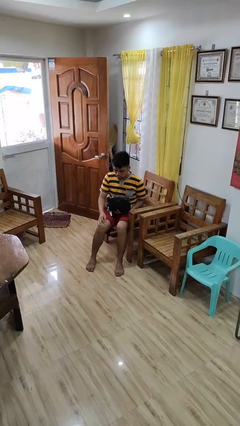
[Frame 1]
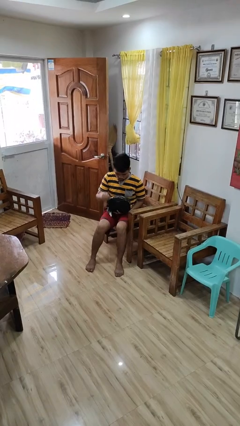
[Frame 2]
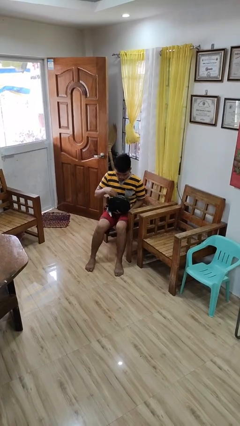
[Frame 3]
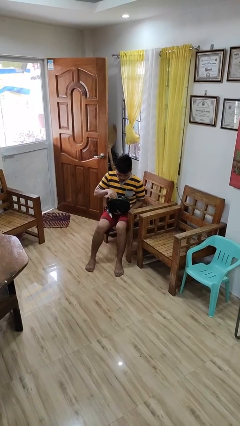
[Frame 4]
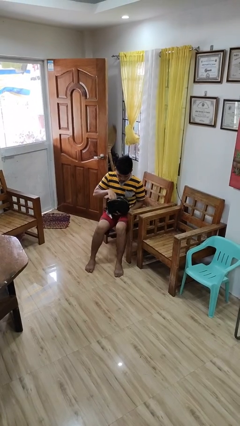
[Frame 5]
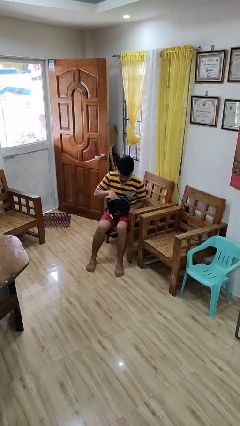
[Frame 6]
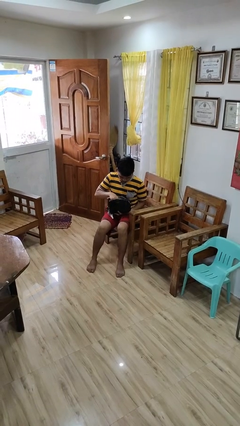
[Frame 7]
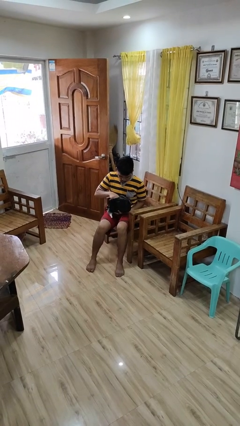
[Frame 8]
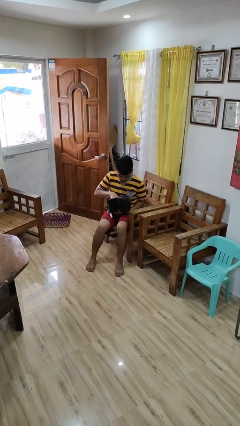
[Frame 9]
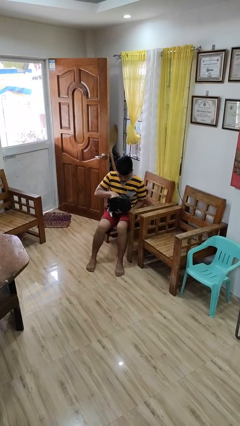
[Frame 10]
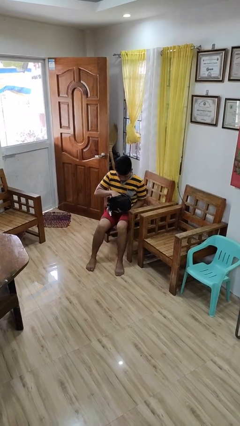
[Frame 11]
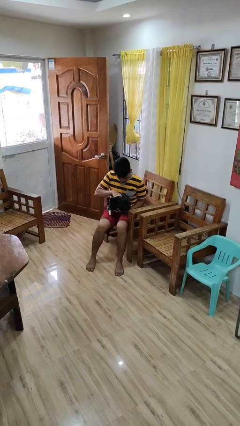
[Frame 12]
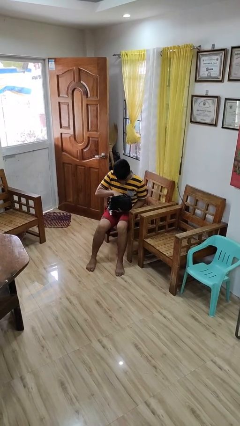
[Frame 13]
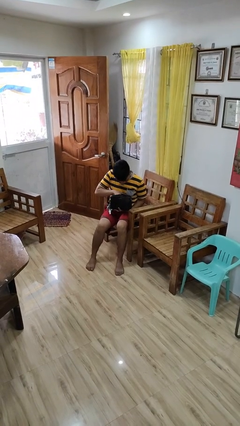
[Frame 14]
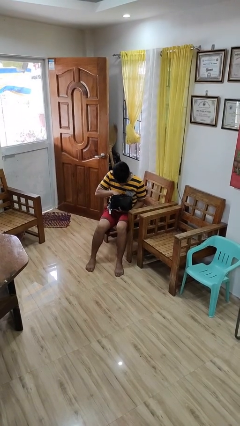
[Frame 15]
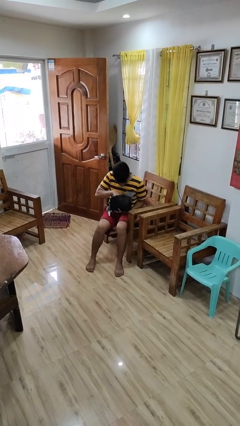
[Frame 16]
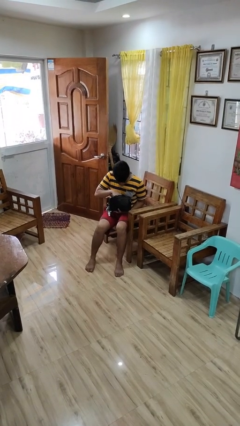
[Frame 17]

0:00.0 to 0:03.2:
person searches in purse

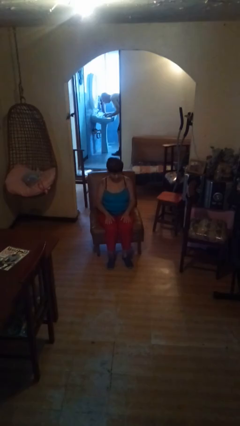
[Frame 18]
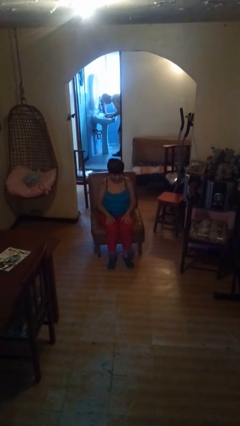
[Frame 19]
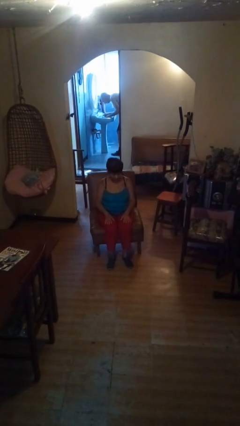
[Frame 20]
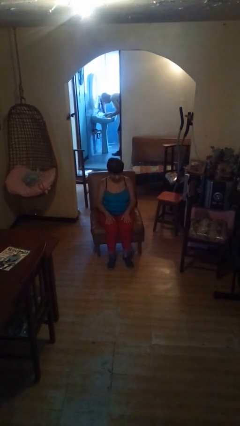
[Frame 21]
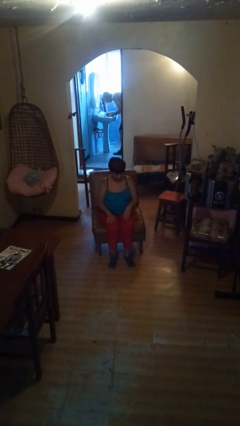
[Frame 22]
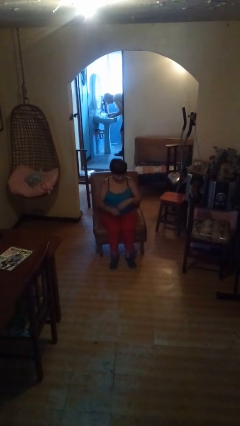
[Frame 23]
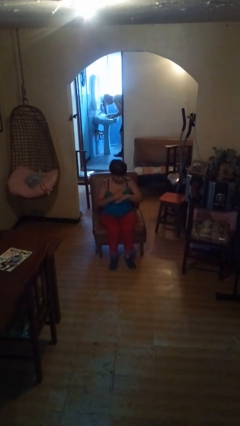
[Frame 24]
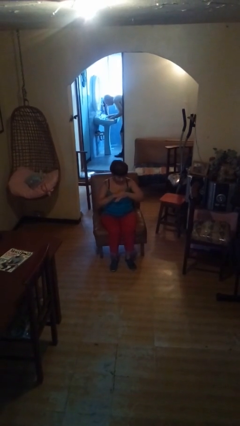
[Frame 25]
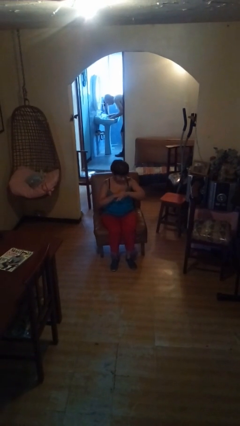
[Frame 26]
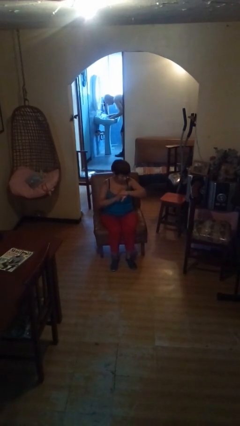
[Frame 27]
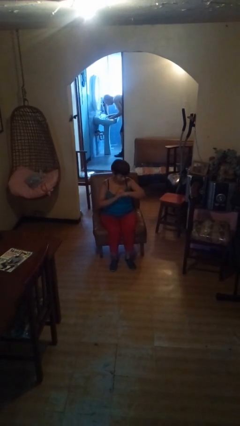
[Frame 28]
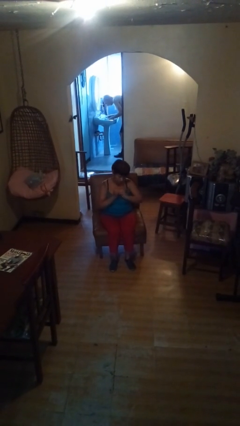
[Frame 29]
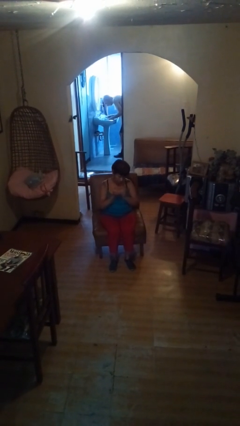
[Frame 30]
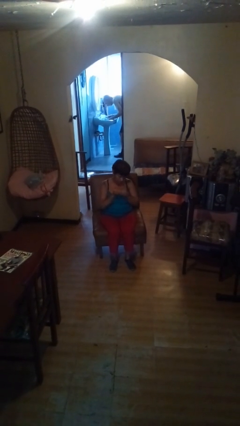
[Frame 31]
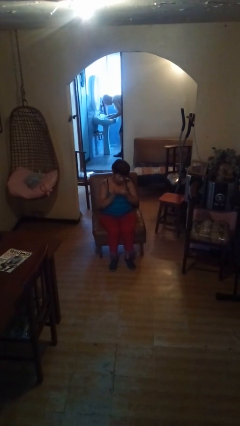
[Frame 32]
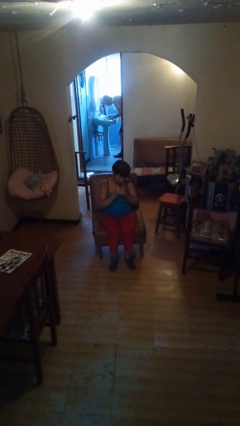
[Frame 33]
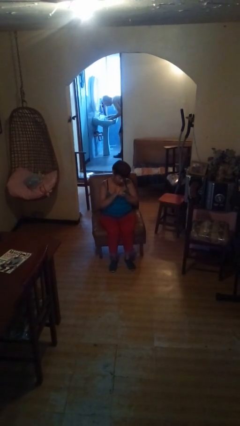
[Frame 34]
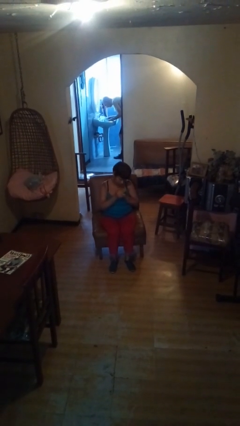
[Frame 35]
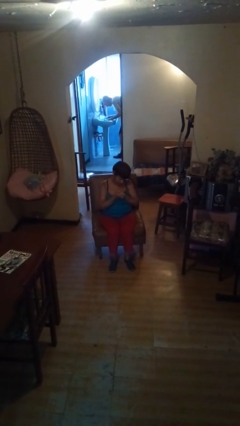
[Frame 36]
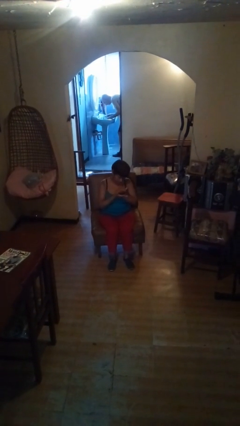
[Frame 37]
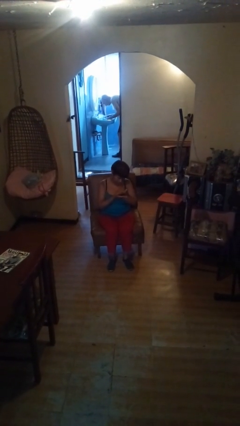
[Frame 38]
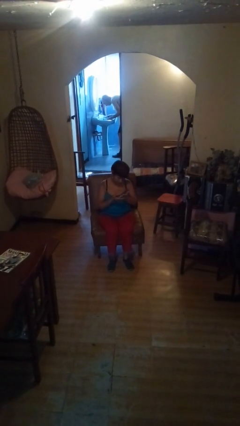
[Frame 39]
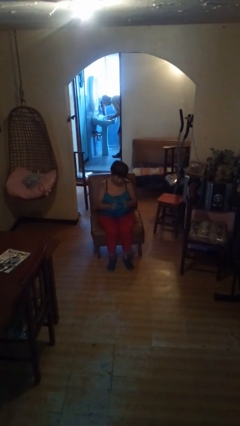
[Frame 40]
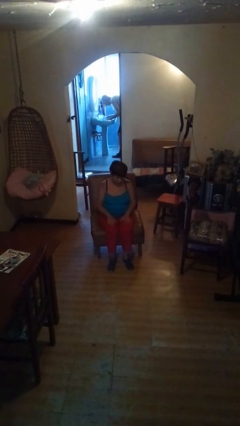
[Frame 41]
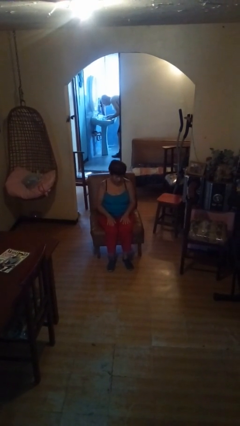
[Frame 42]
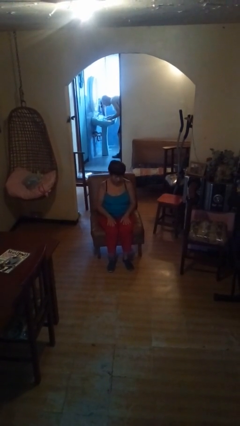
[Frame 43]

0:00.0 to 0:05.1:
person looks at hands in lap

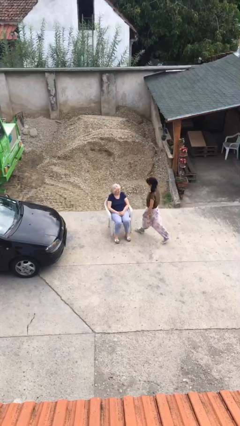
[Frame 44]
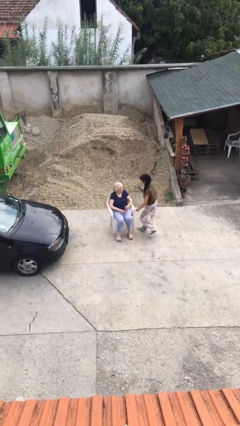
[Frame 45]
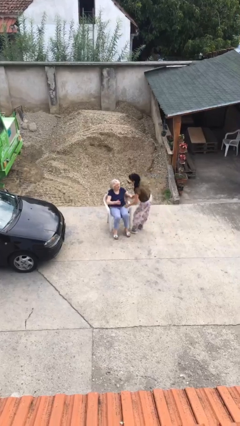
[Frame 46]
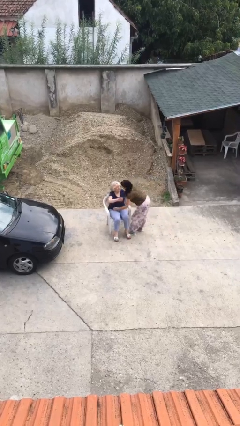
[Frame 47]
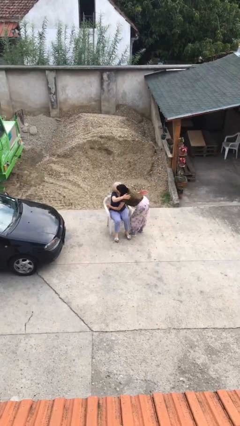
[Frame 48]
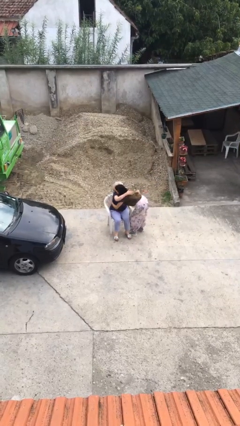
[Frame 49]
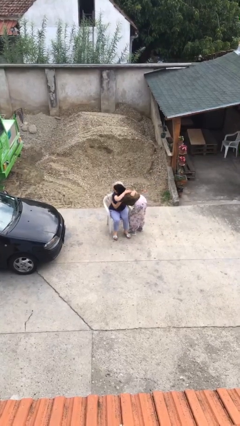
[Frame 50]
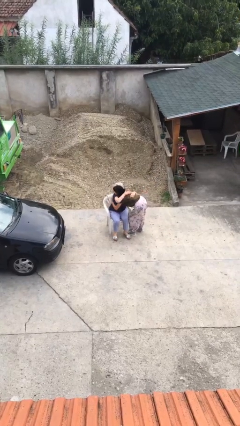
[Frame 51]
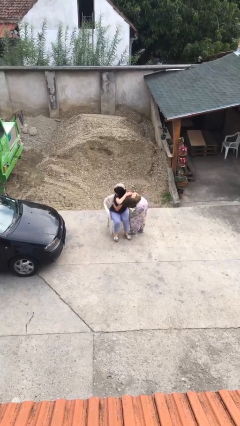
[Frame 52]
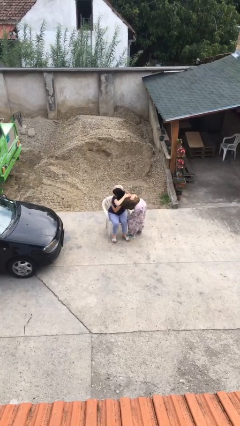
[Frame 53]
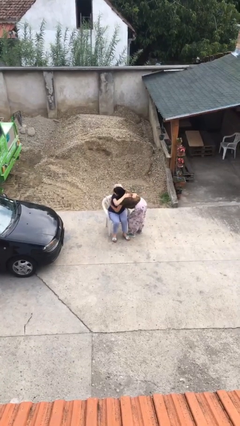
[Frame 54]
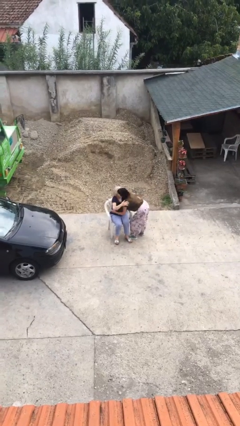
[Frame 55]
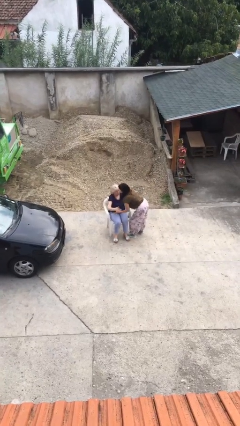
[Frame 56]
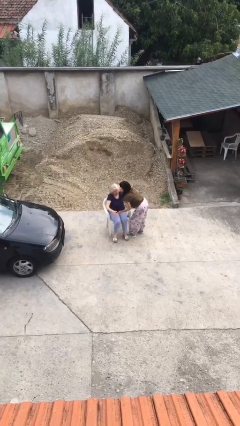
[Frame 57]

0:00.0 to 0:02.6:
person embraces person

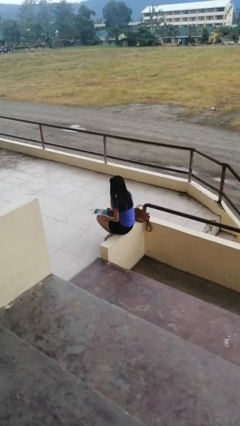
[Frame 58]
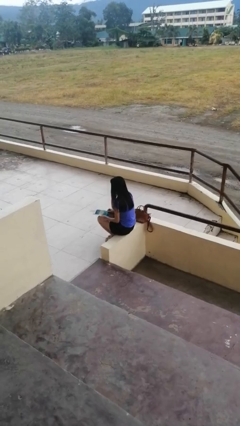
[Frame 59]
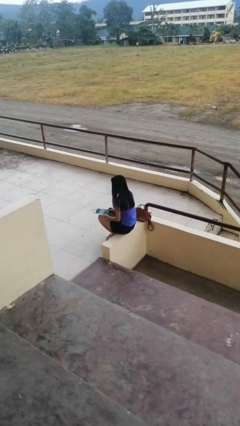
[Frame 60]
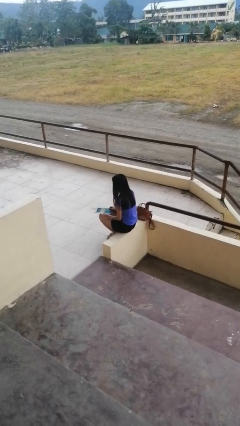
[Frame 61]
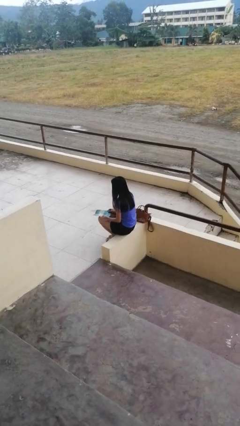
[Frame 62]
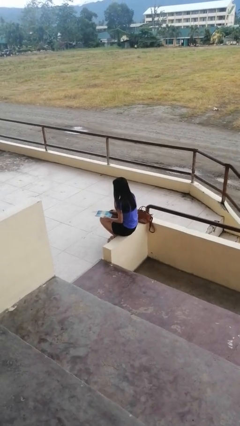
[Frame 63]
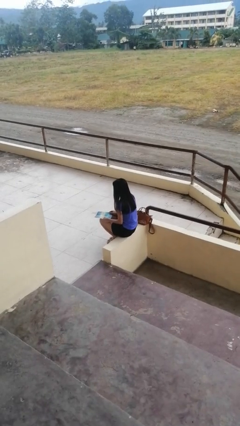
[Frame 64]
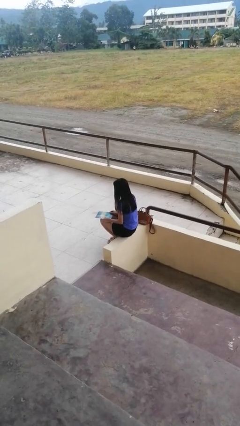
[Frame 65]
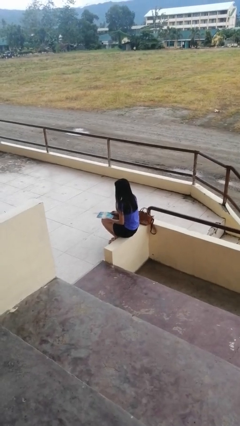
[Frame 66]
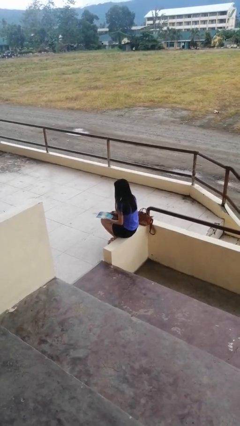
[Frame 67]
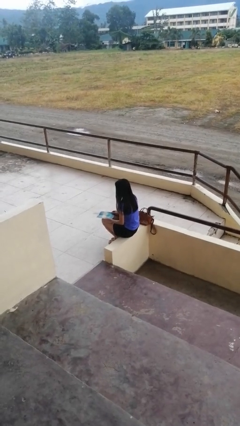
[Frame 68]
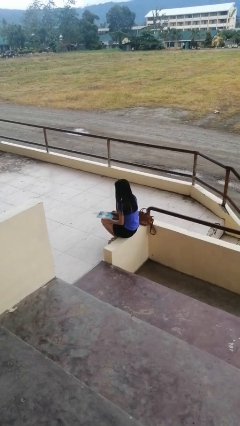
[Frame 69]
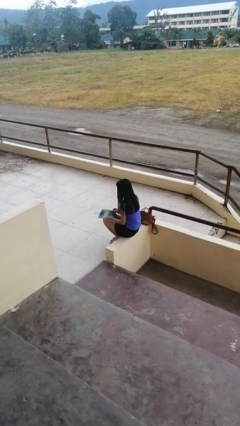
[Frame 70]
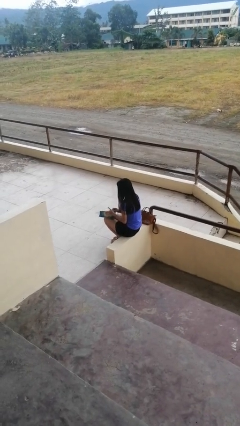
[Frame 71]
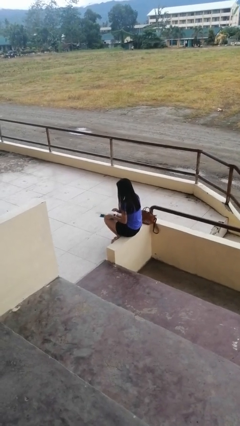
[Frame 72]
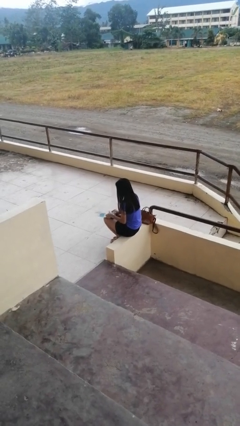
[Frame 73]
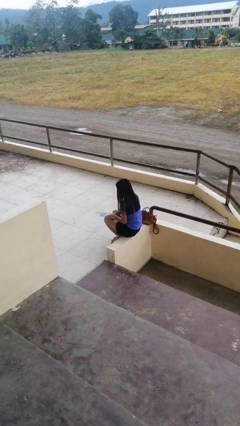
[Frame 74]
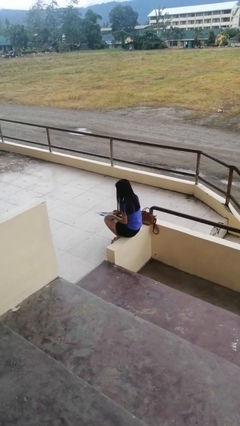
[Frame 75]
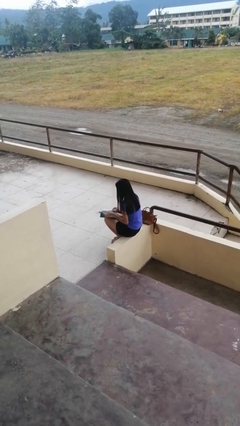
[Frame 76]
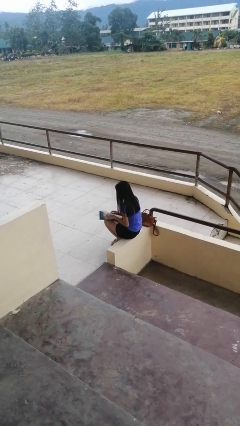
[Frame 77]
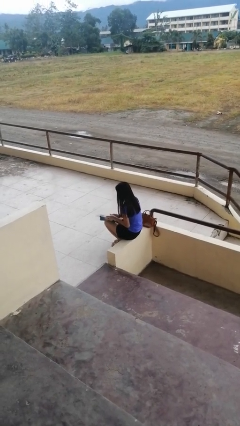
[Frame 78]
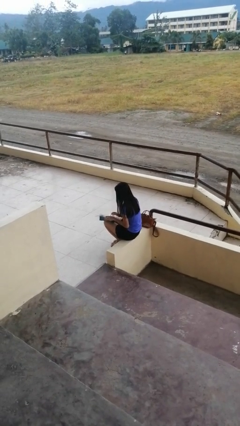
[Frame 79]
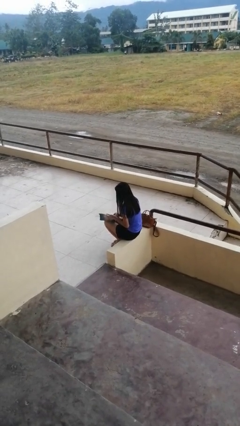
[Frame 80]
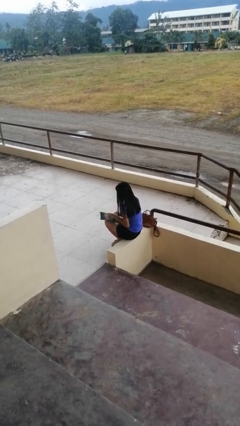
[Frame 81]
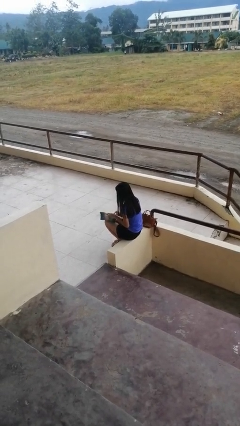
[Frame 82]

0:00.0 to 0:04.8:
person reads magazine

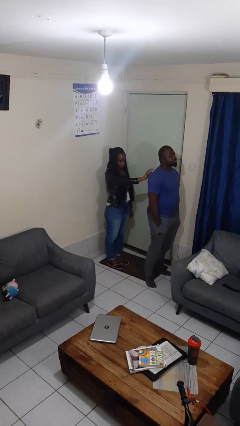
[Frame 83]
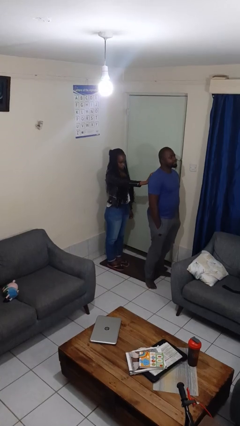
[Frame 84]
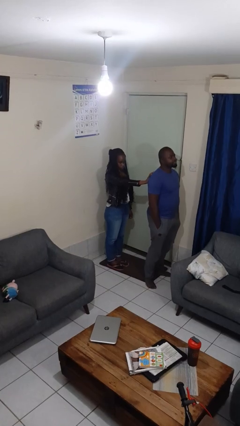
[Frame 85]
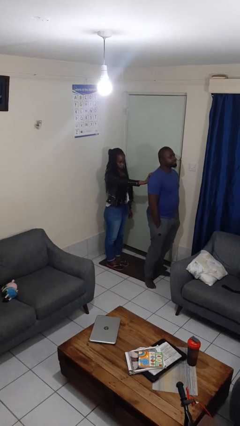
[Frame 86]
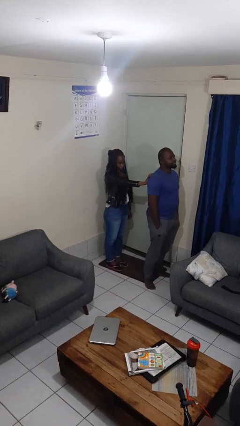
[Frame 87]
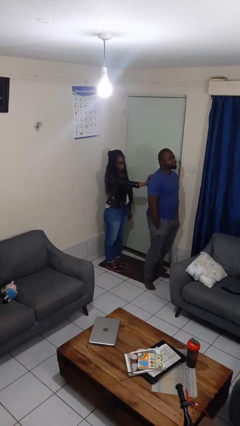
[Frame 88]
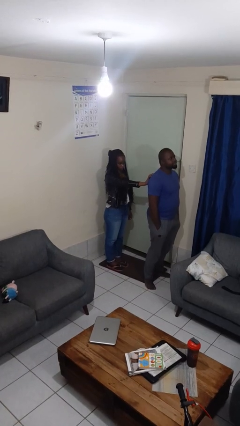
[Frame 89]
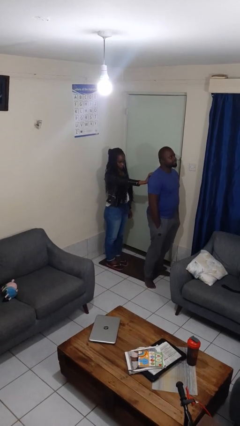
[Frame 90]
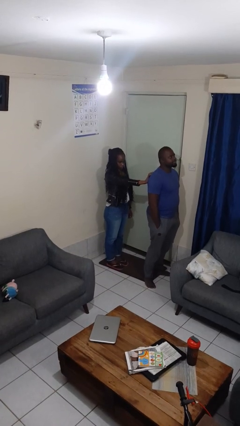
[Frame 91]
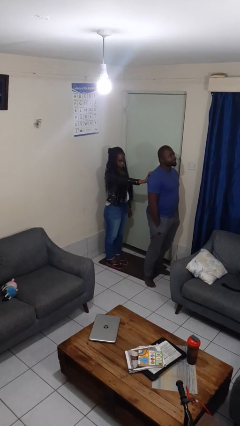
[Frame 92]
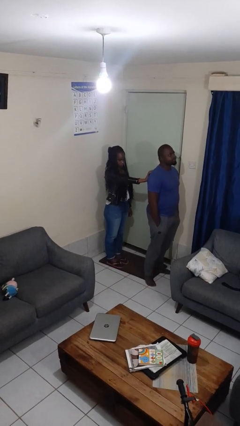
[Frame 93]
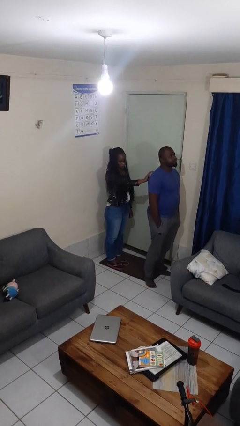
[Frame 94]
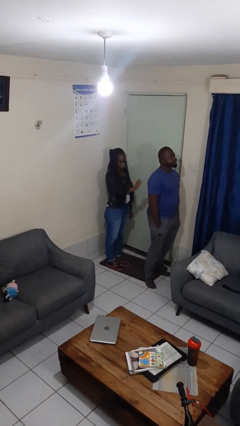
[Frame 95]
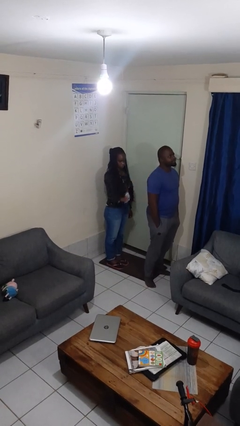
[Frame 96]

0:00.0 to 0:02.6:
person touches back of person
